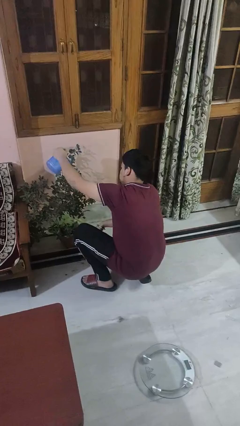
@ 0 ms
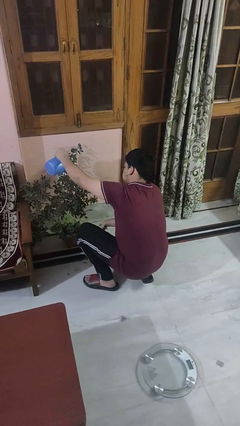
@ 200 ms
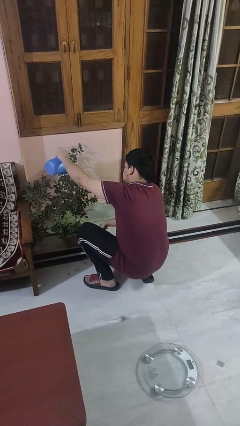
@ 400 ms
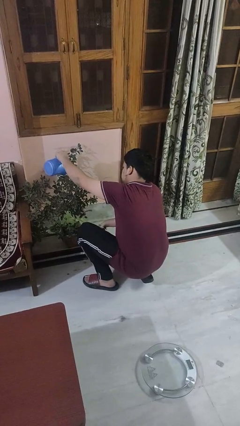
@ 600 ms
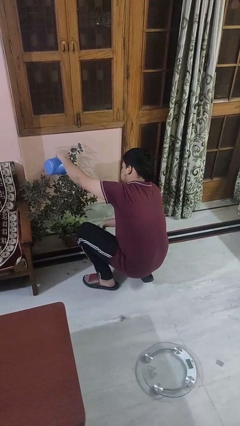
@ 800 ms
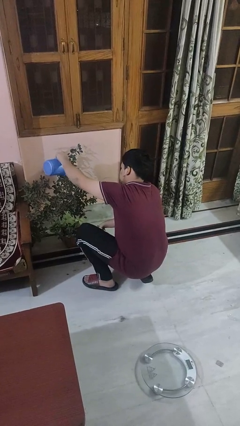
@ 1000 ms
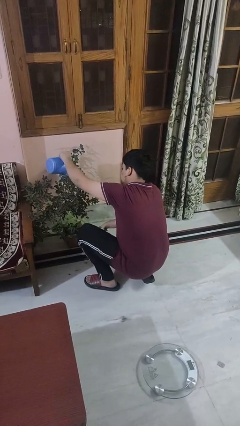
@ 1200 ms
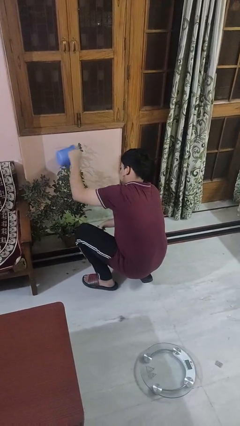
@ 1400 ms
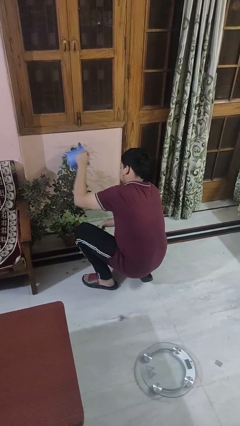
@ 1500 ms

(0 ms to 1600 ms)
person waters houseplant

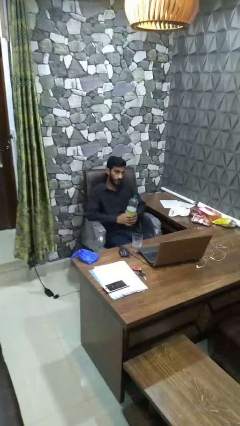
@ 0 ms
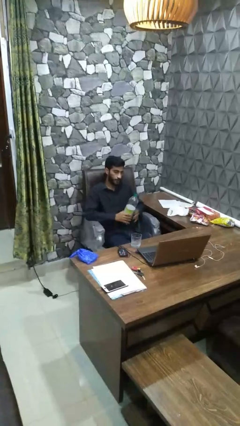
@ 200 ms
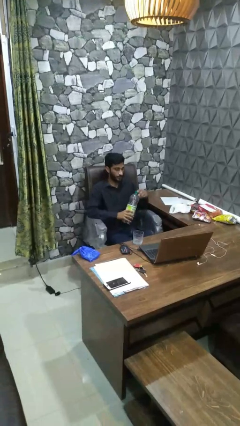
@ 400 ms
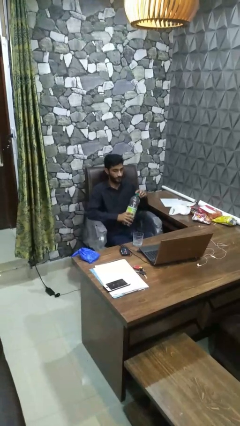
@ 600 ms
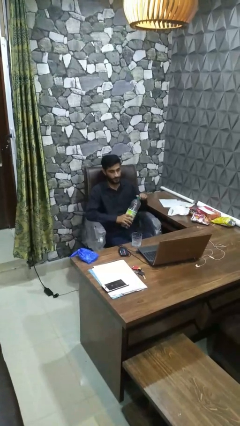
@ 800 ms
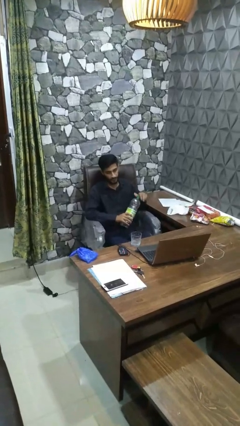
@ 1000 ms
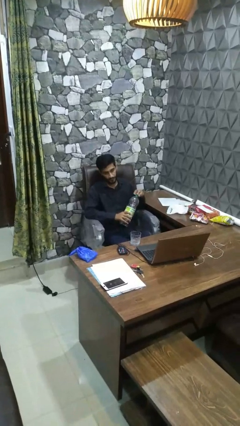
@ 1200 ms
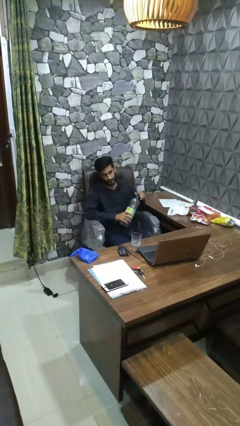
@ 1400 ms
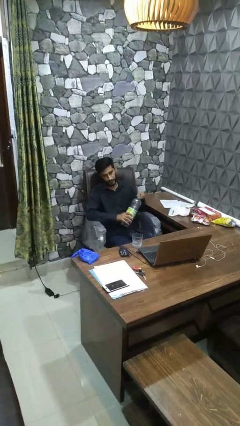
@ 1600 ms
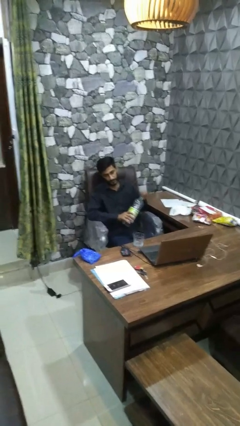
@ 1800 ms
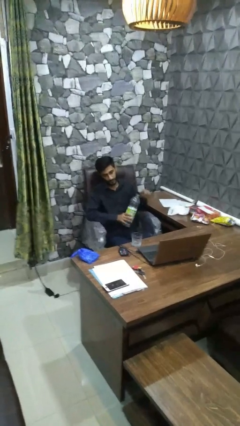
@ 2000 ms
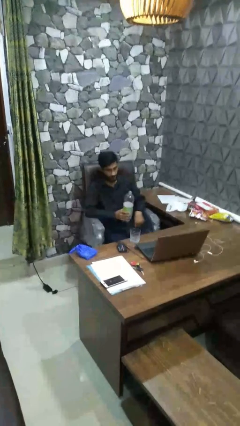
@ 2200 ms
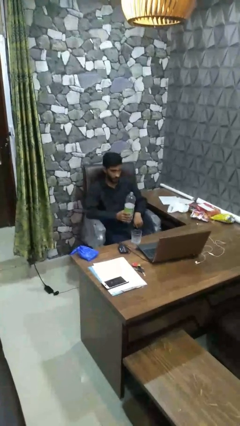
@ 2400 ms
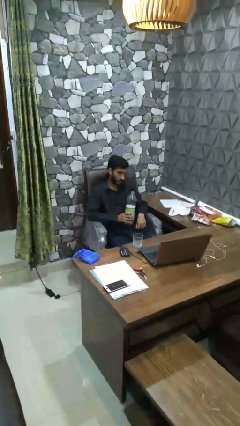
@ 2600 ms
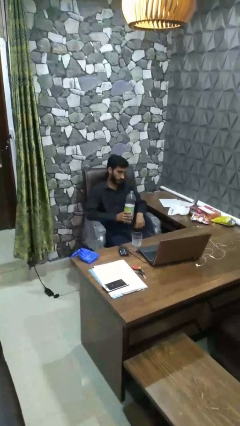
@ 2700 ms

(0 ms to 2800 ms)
person unscrews lid from bottle

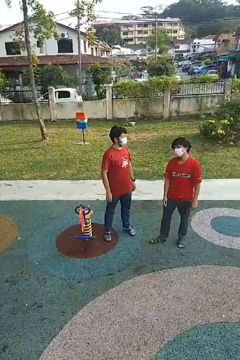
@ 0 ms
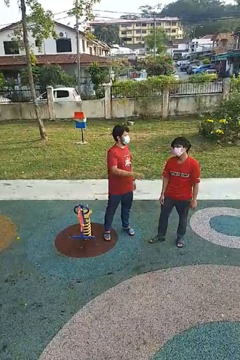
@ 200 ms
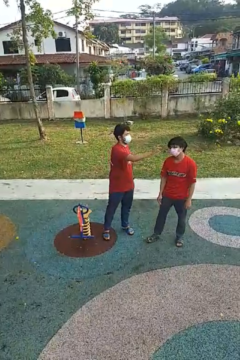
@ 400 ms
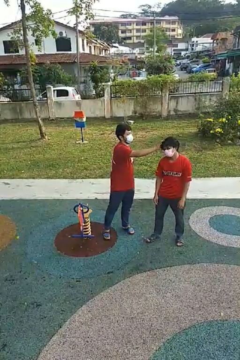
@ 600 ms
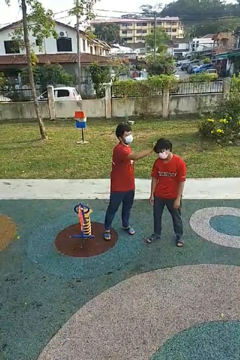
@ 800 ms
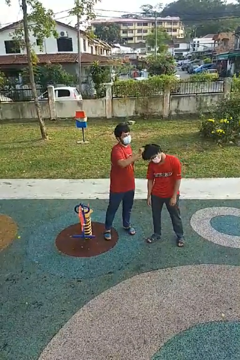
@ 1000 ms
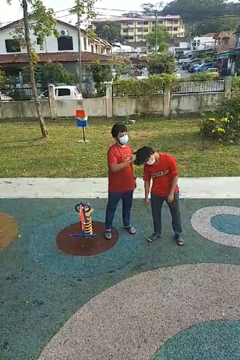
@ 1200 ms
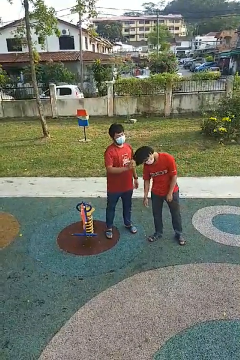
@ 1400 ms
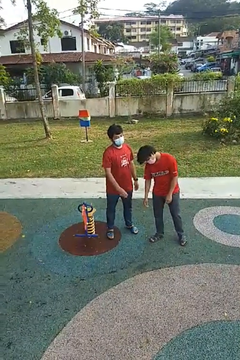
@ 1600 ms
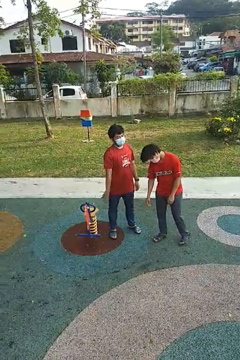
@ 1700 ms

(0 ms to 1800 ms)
person grabs person by hair

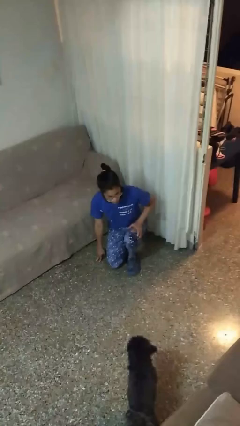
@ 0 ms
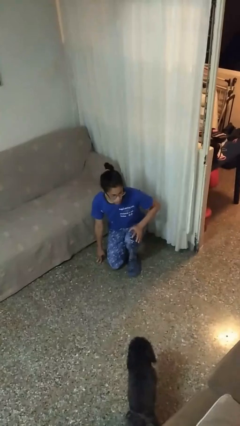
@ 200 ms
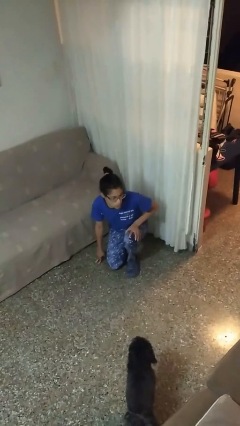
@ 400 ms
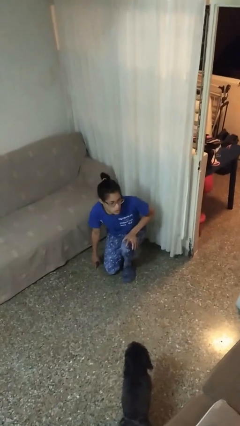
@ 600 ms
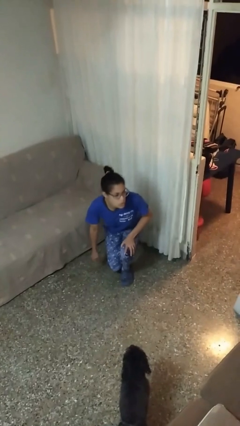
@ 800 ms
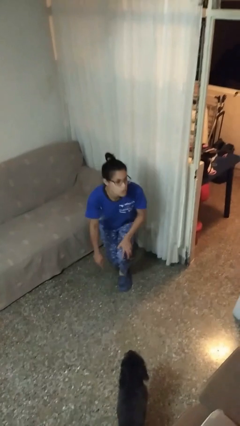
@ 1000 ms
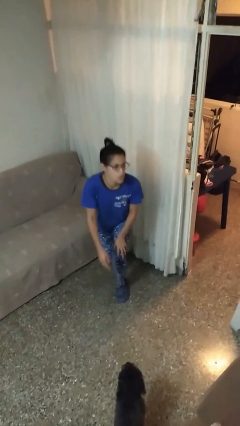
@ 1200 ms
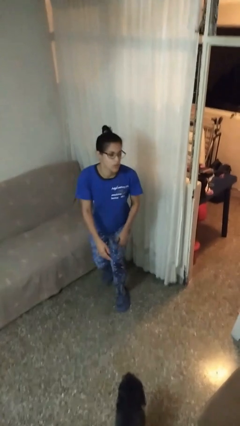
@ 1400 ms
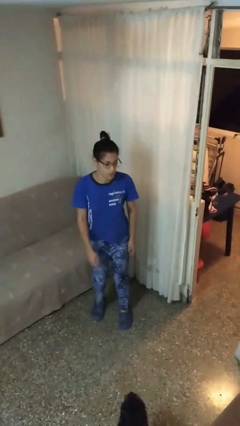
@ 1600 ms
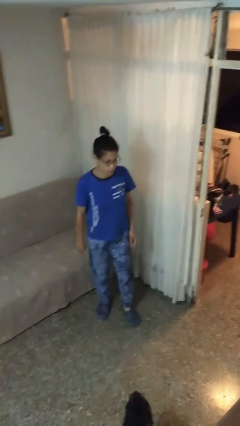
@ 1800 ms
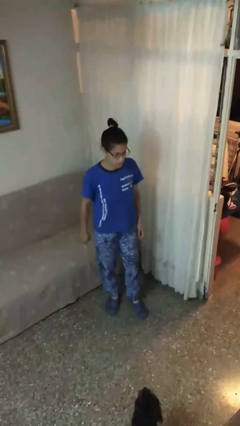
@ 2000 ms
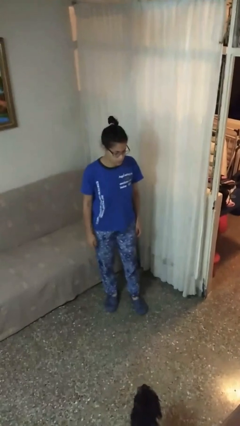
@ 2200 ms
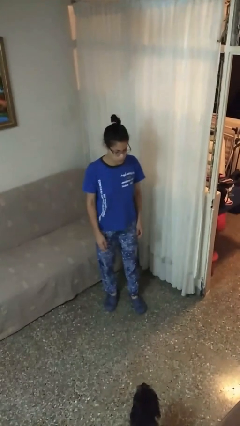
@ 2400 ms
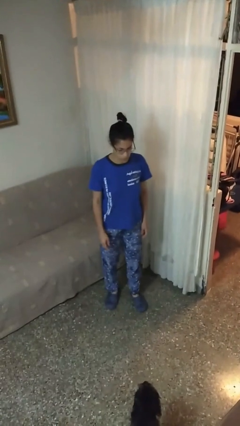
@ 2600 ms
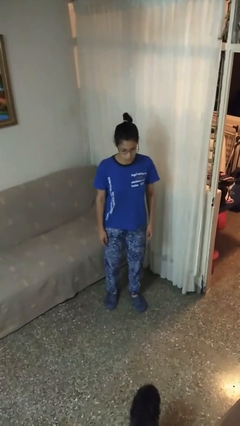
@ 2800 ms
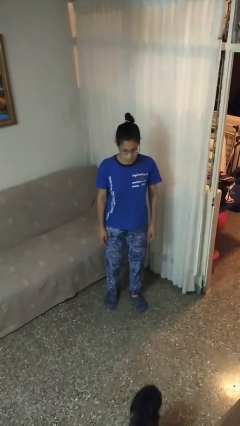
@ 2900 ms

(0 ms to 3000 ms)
person stands up from floor

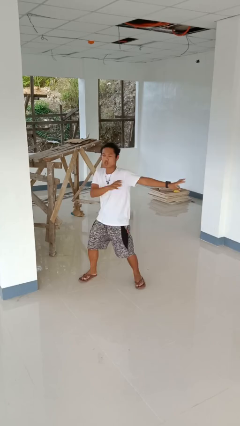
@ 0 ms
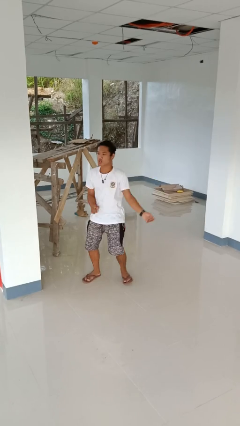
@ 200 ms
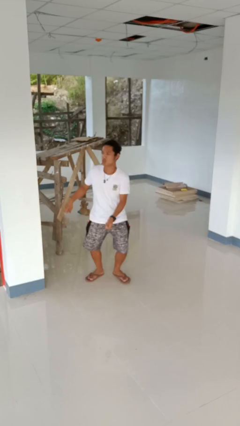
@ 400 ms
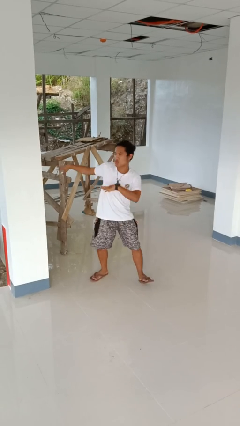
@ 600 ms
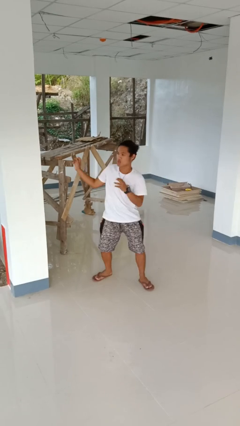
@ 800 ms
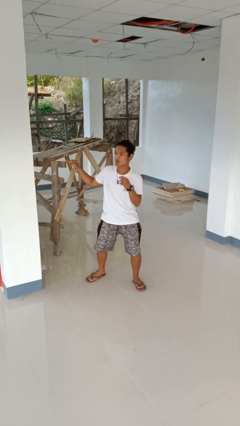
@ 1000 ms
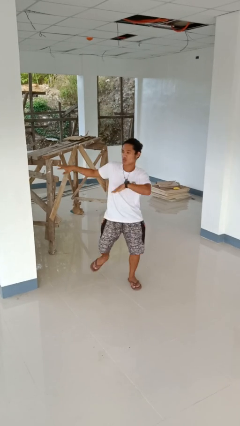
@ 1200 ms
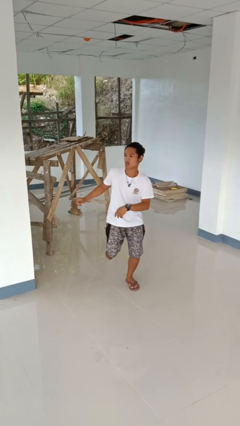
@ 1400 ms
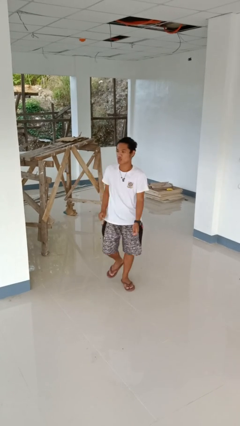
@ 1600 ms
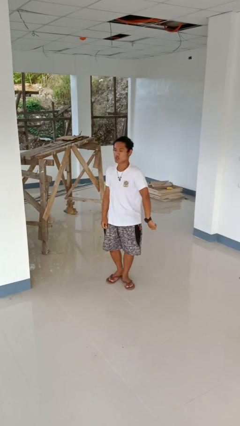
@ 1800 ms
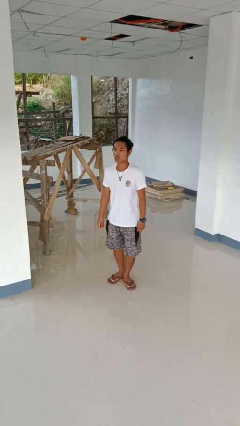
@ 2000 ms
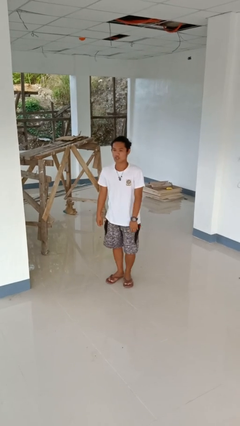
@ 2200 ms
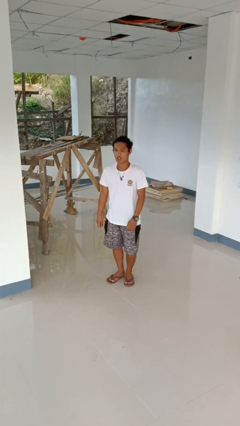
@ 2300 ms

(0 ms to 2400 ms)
person dances in place

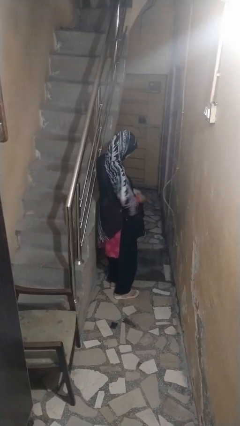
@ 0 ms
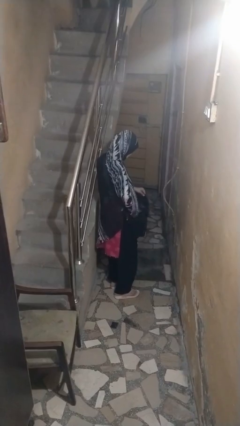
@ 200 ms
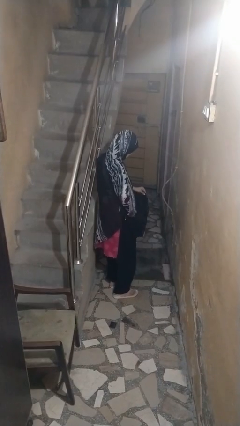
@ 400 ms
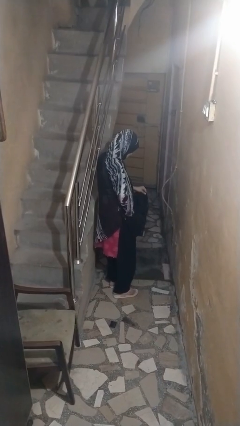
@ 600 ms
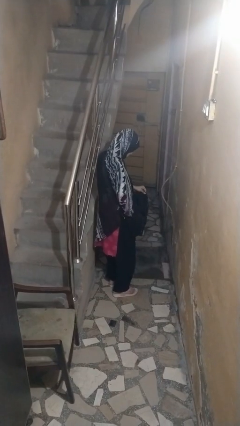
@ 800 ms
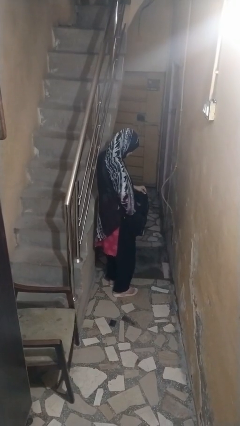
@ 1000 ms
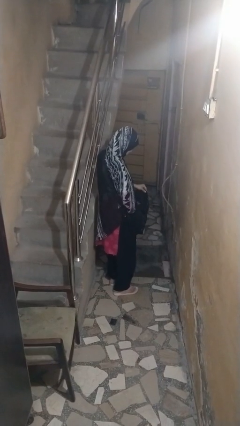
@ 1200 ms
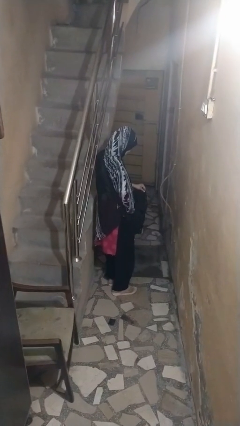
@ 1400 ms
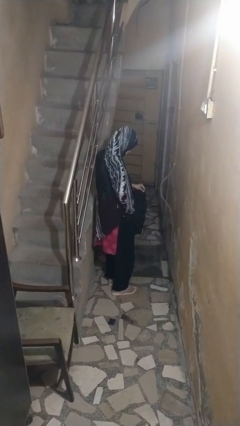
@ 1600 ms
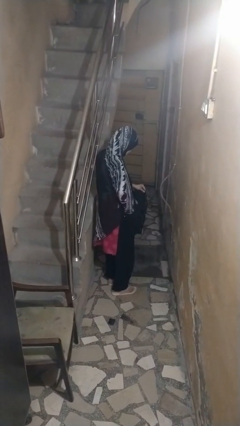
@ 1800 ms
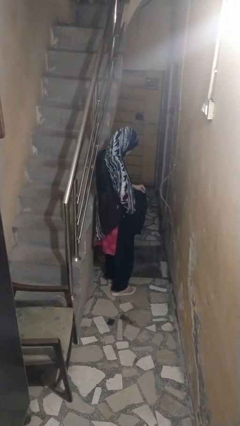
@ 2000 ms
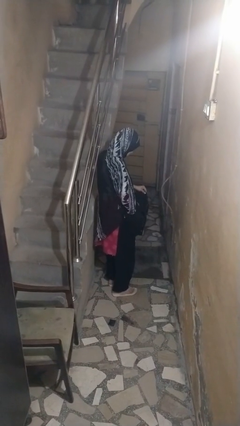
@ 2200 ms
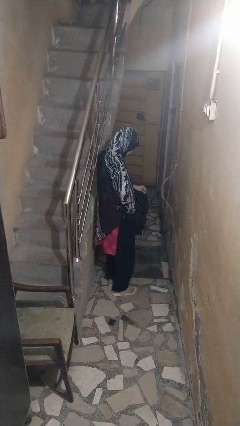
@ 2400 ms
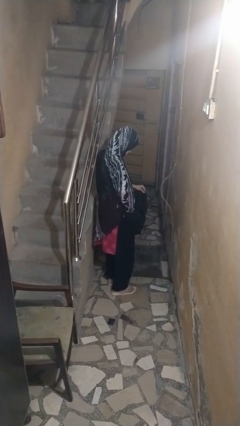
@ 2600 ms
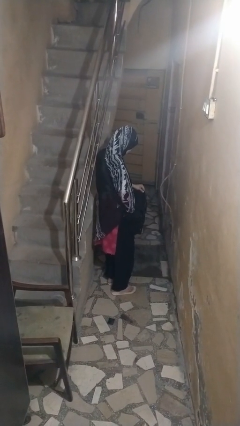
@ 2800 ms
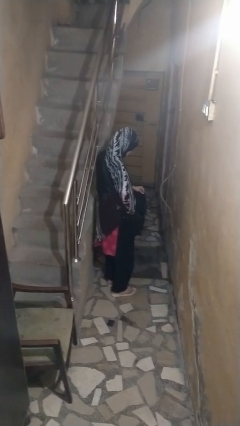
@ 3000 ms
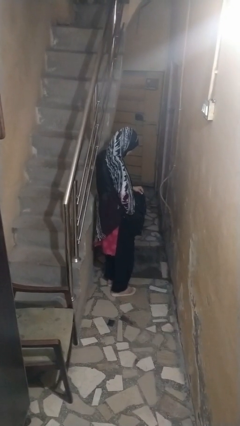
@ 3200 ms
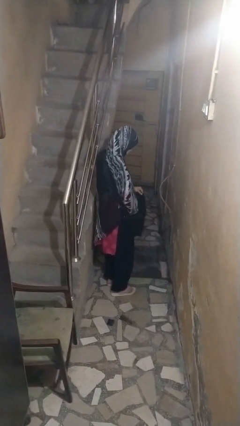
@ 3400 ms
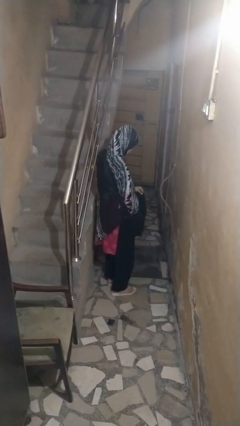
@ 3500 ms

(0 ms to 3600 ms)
person searches in backpack

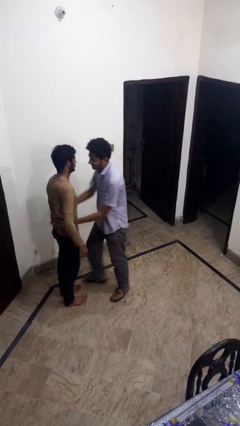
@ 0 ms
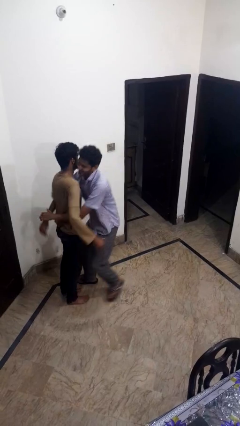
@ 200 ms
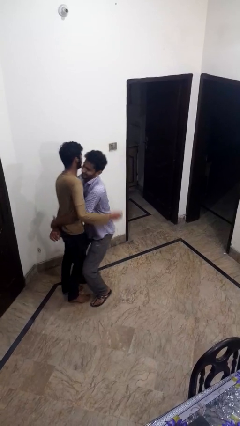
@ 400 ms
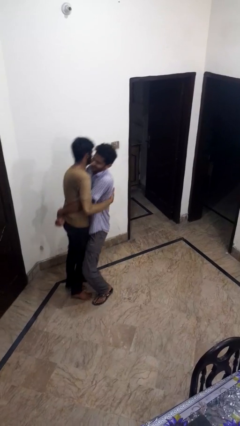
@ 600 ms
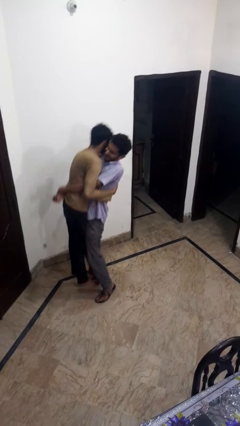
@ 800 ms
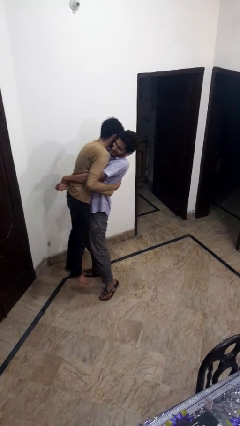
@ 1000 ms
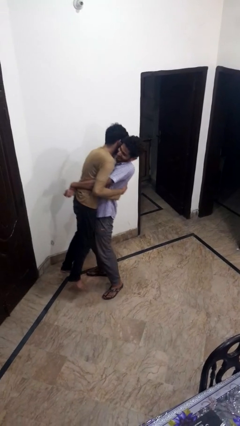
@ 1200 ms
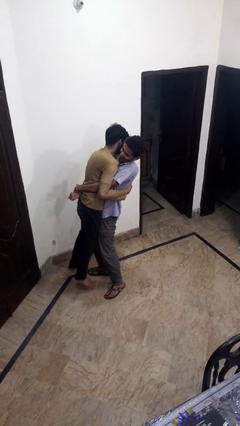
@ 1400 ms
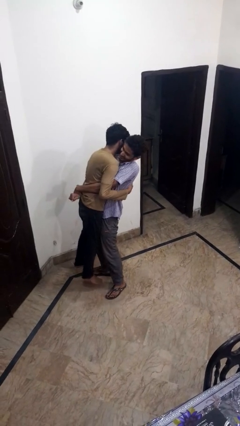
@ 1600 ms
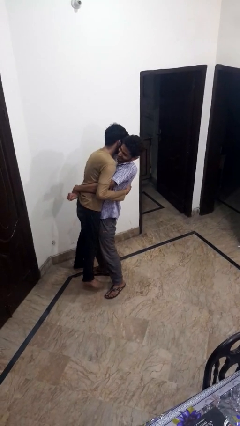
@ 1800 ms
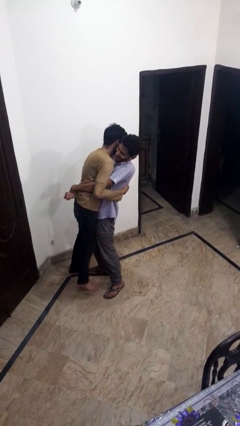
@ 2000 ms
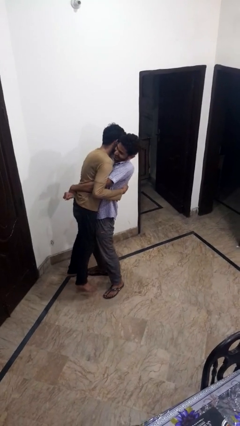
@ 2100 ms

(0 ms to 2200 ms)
person picks up person
